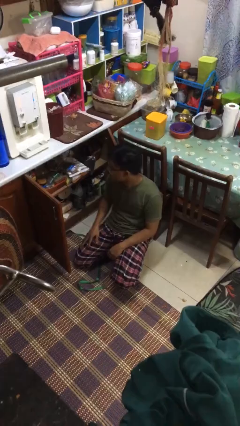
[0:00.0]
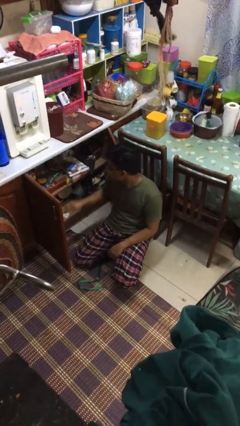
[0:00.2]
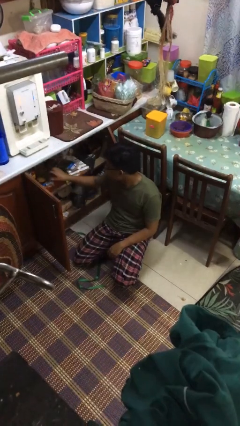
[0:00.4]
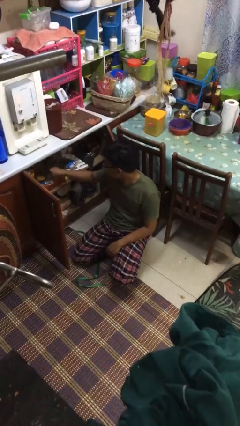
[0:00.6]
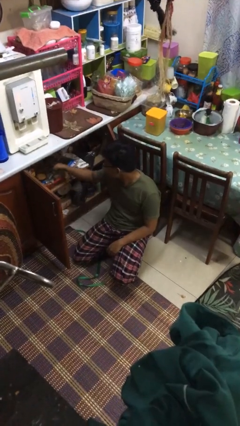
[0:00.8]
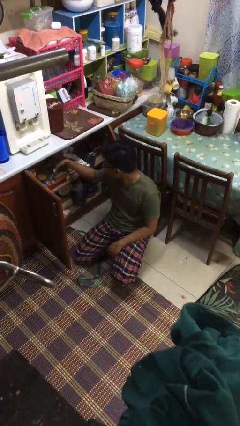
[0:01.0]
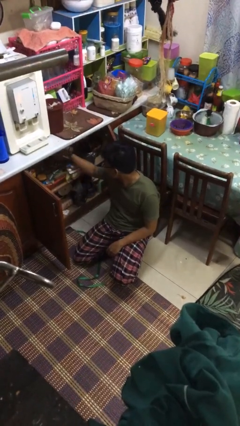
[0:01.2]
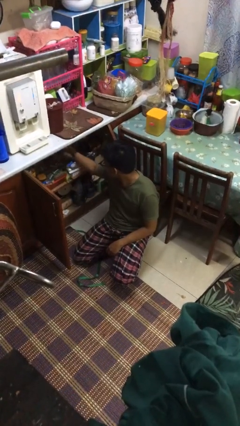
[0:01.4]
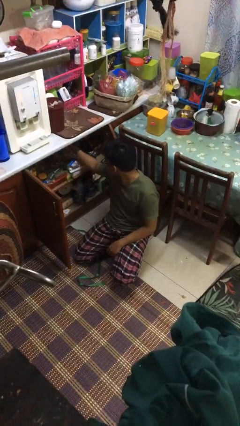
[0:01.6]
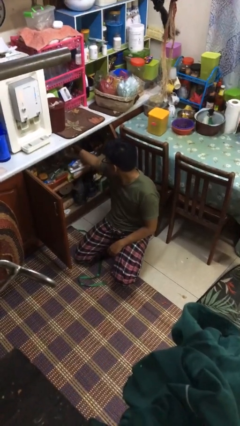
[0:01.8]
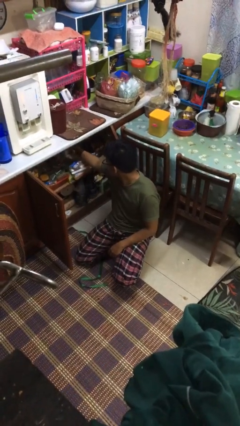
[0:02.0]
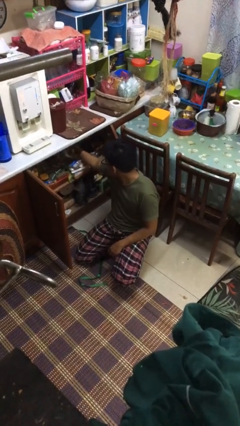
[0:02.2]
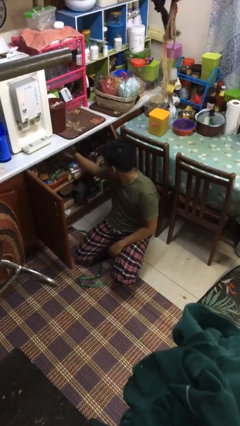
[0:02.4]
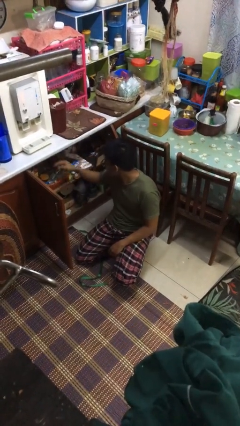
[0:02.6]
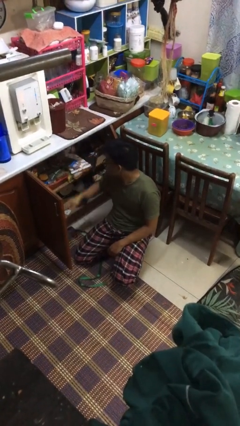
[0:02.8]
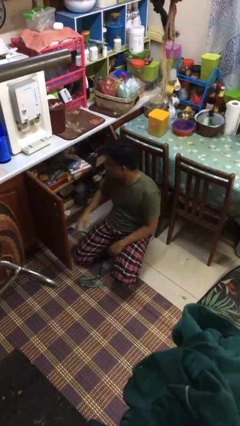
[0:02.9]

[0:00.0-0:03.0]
person searches in kitchen drawer

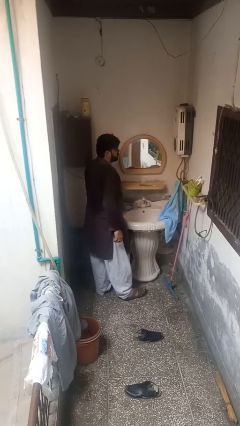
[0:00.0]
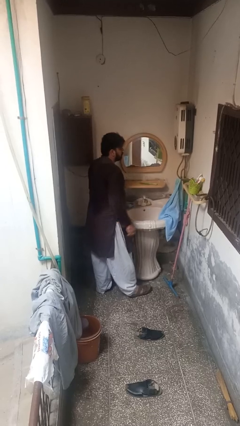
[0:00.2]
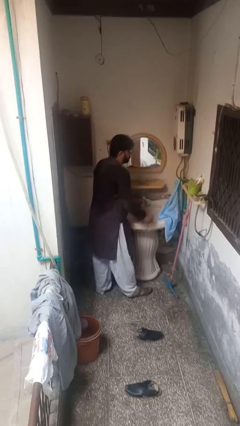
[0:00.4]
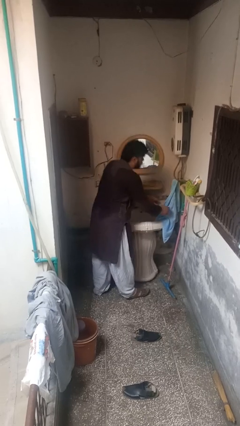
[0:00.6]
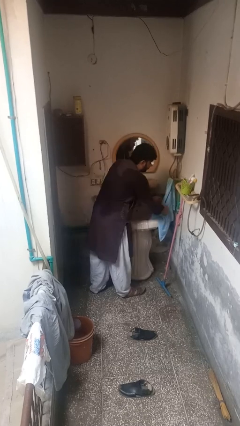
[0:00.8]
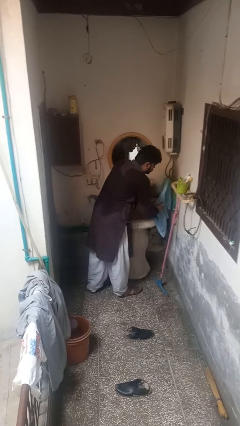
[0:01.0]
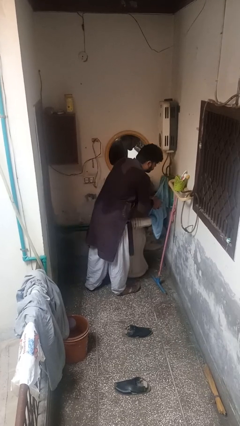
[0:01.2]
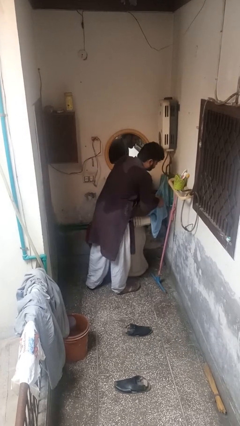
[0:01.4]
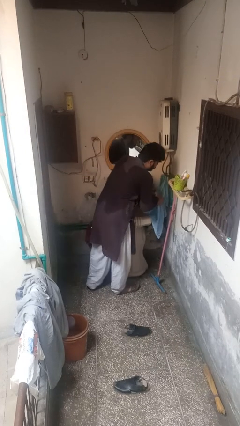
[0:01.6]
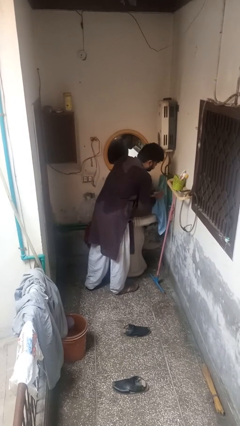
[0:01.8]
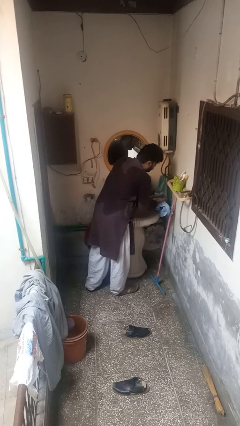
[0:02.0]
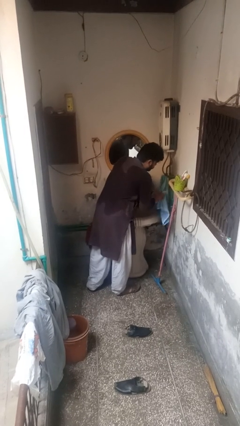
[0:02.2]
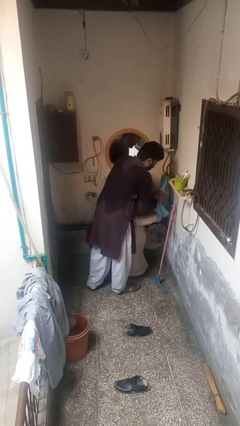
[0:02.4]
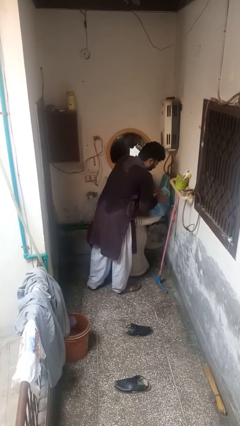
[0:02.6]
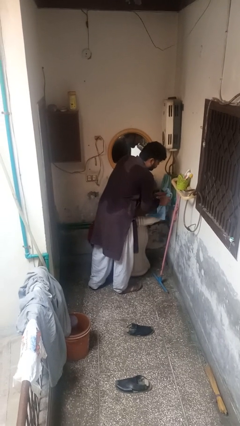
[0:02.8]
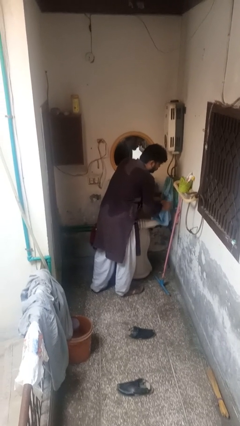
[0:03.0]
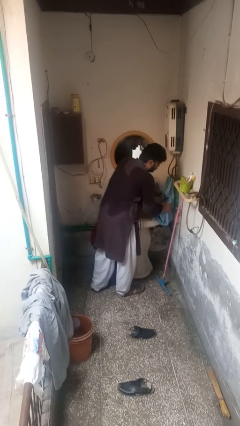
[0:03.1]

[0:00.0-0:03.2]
person dries hands with towel

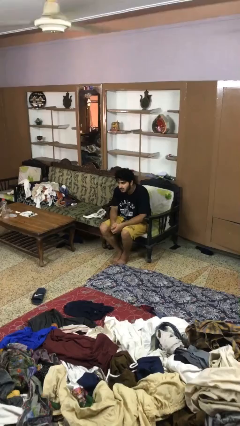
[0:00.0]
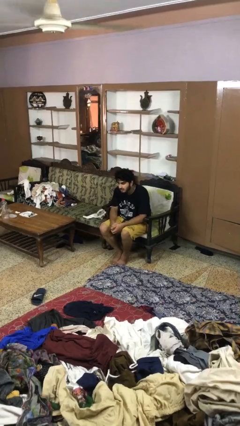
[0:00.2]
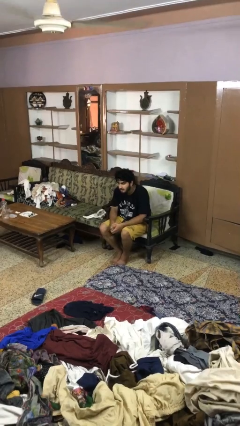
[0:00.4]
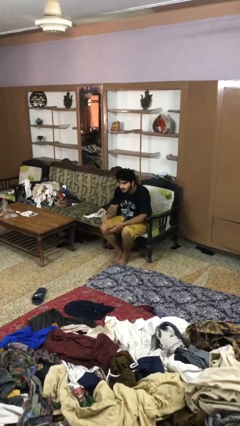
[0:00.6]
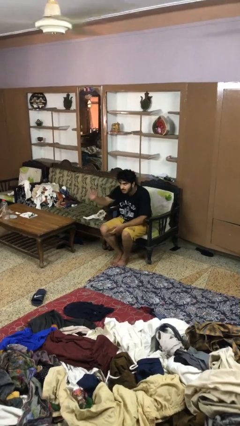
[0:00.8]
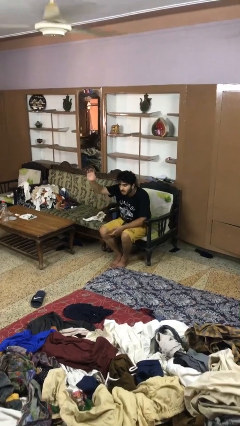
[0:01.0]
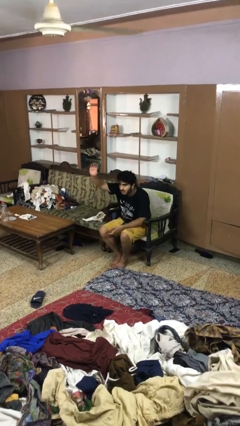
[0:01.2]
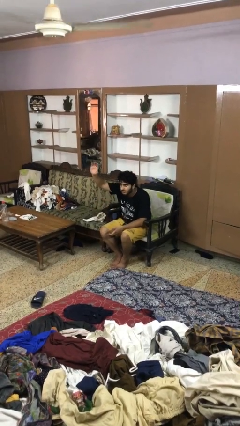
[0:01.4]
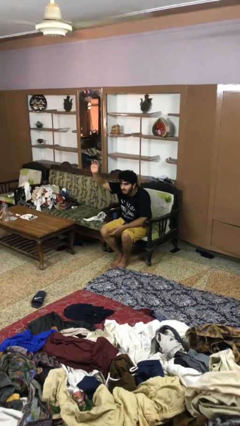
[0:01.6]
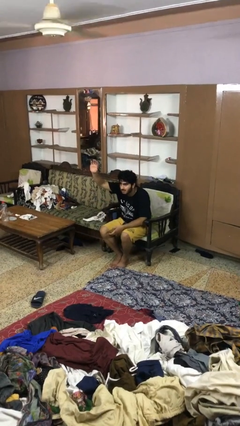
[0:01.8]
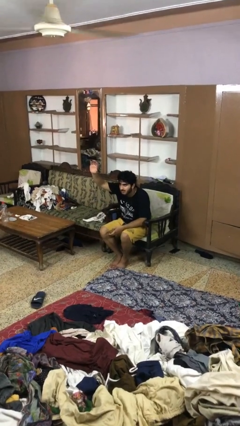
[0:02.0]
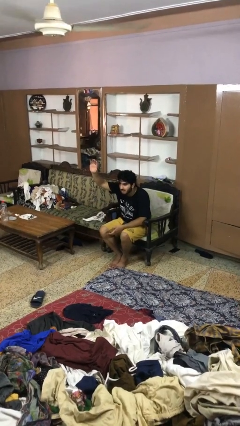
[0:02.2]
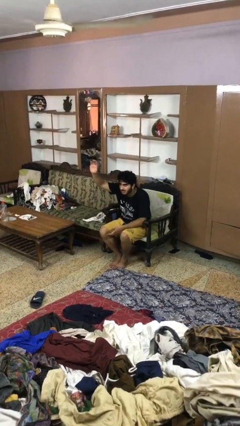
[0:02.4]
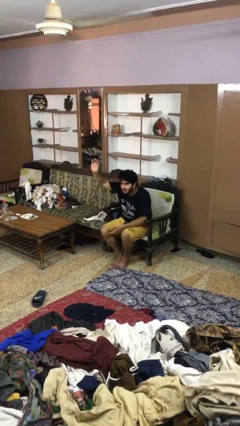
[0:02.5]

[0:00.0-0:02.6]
person gestures raise hand

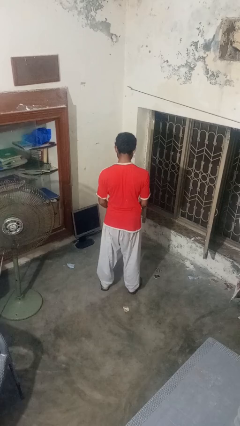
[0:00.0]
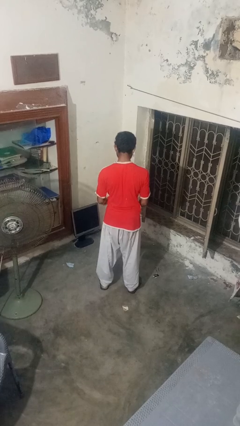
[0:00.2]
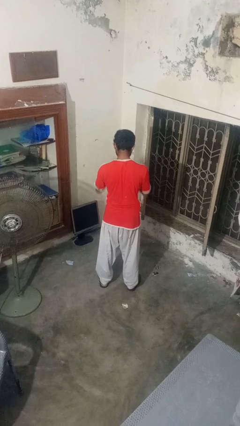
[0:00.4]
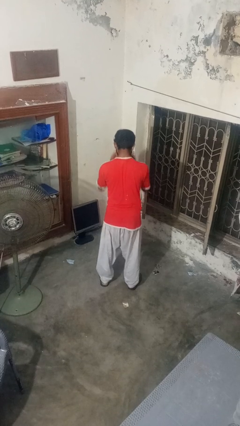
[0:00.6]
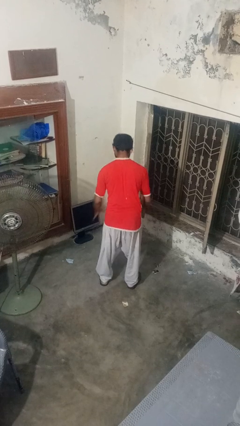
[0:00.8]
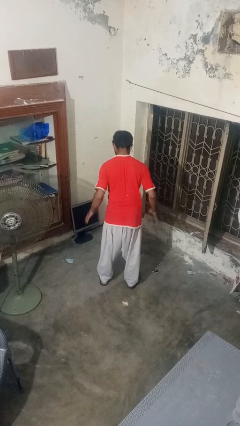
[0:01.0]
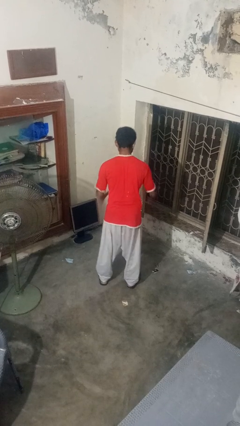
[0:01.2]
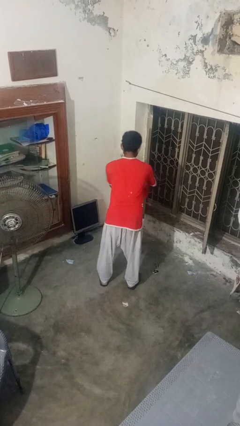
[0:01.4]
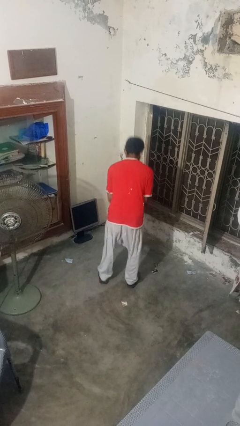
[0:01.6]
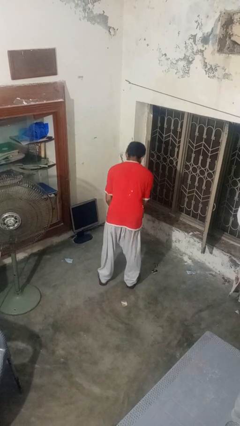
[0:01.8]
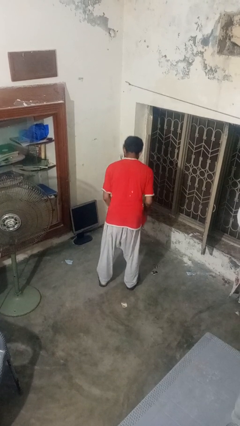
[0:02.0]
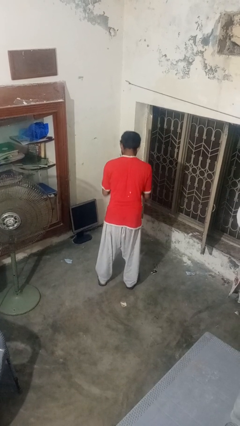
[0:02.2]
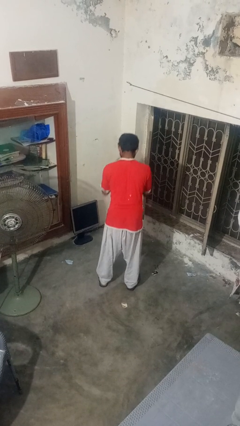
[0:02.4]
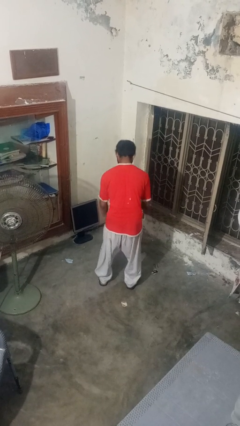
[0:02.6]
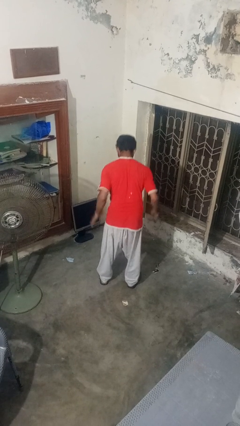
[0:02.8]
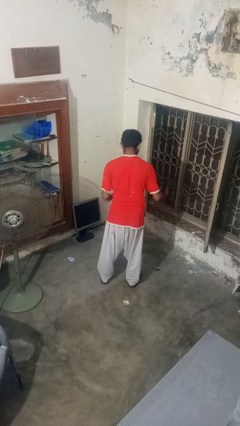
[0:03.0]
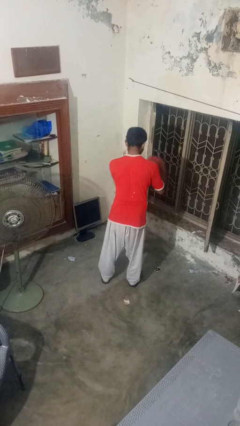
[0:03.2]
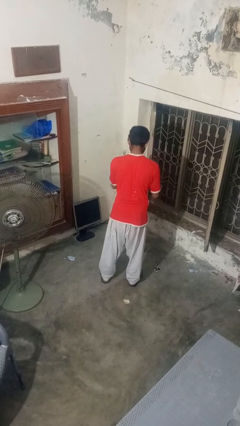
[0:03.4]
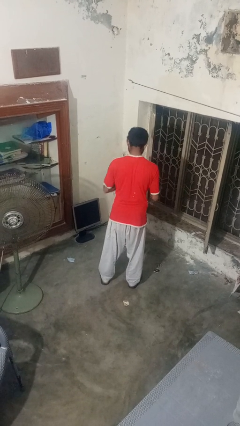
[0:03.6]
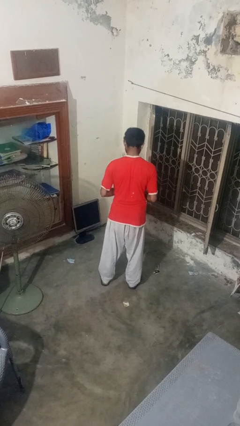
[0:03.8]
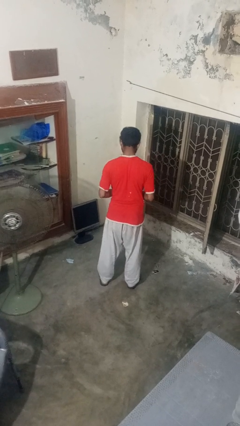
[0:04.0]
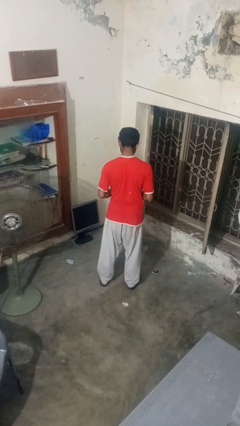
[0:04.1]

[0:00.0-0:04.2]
person bounces ball on floor

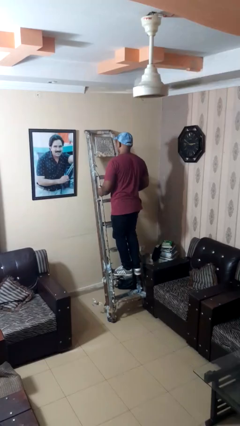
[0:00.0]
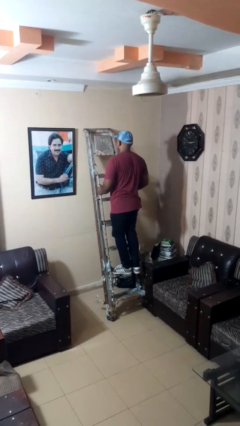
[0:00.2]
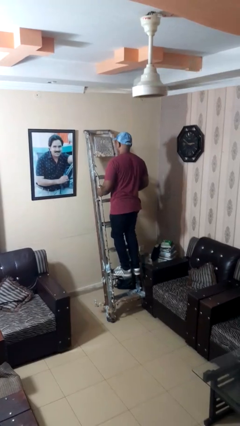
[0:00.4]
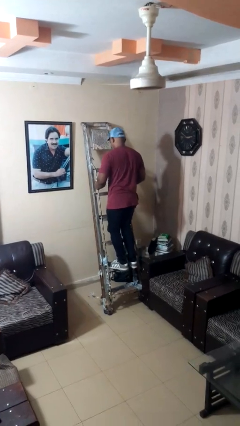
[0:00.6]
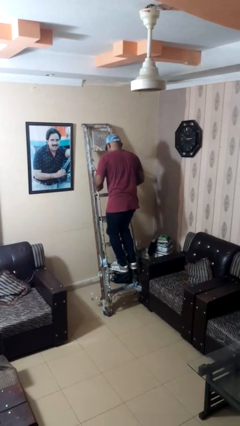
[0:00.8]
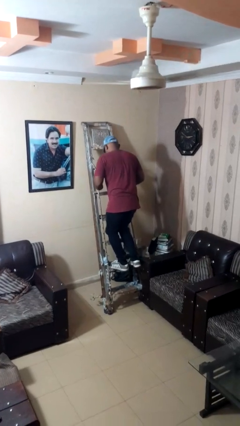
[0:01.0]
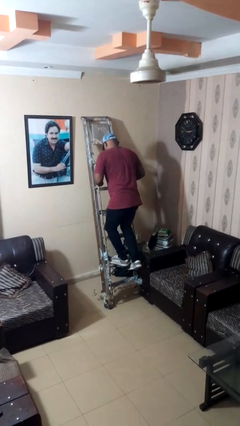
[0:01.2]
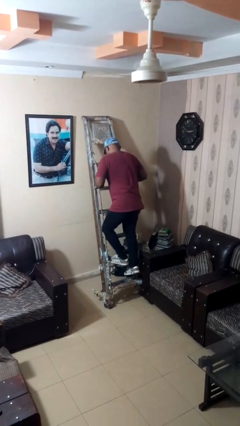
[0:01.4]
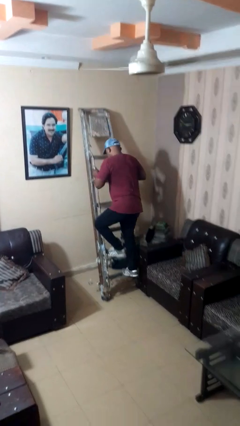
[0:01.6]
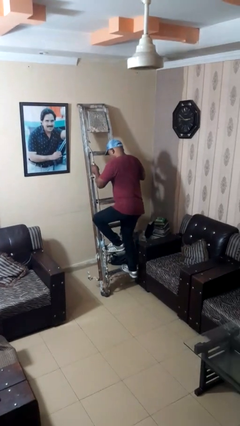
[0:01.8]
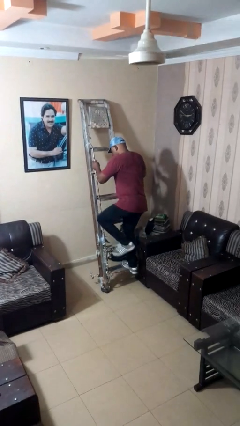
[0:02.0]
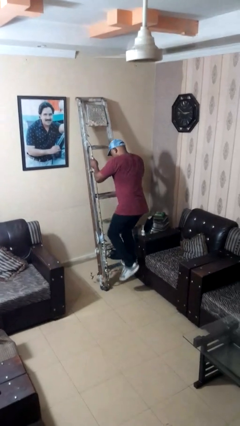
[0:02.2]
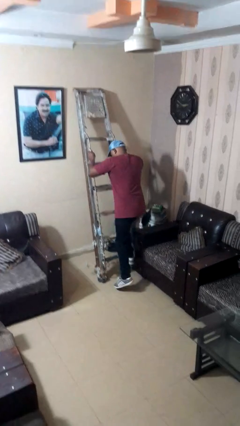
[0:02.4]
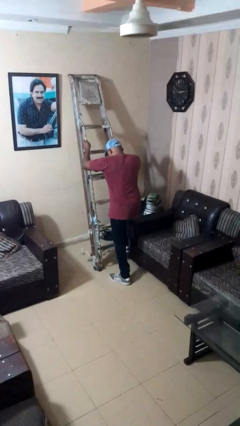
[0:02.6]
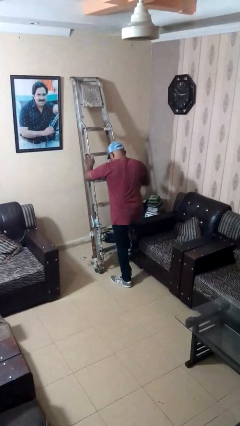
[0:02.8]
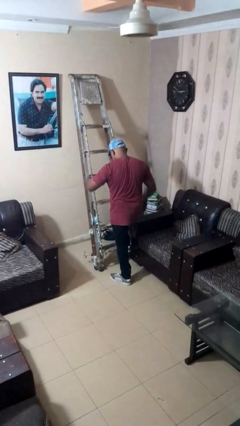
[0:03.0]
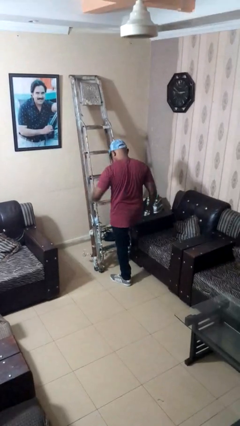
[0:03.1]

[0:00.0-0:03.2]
person climbs down ladder

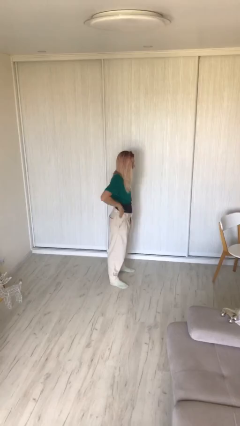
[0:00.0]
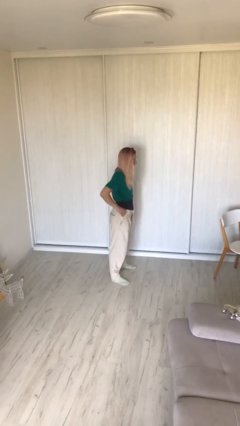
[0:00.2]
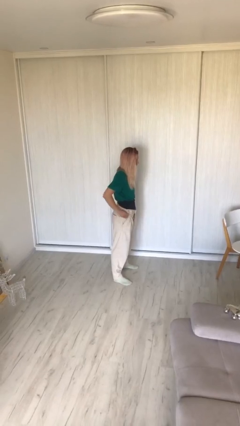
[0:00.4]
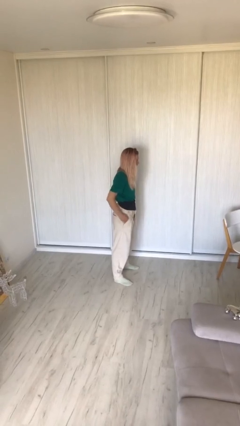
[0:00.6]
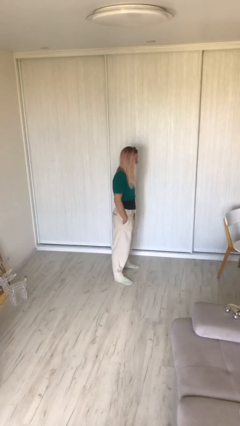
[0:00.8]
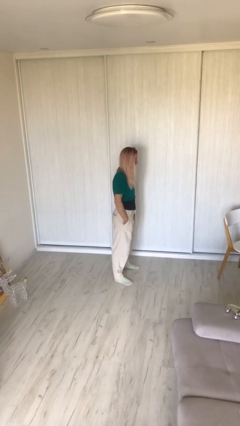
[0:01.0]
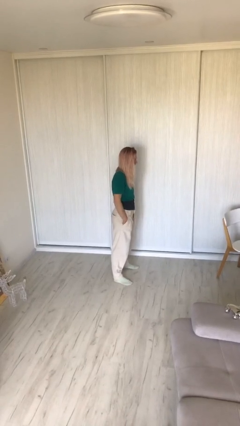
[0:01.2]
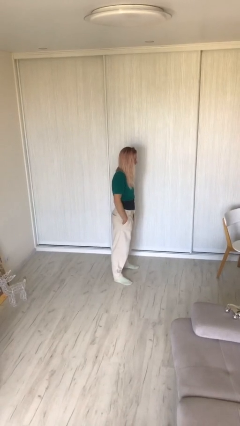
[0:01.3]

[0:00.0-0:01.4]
person puts hands in back pockets
